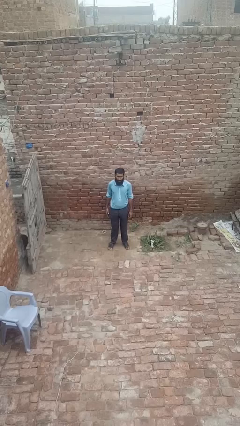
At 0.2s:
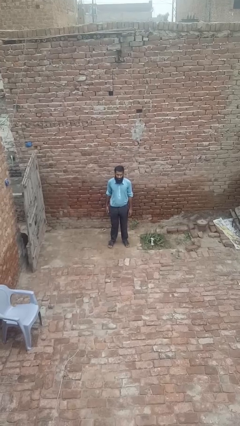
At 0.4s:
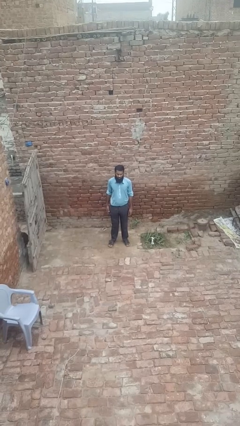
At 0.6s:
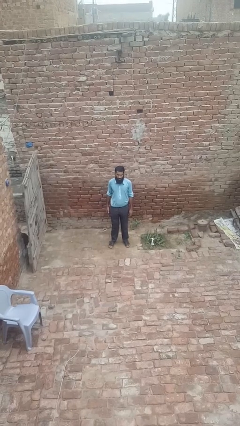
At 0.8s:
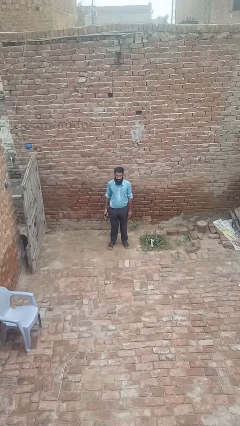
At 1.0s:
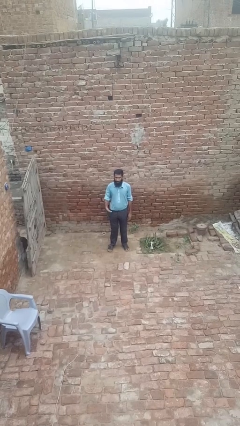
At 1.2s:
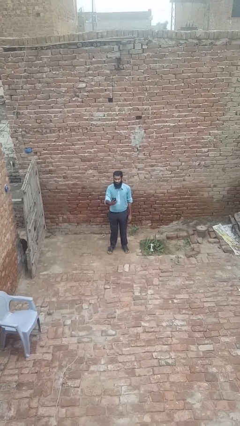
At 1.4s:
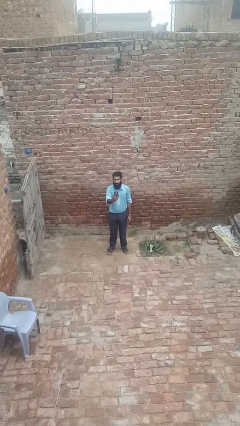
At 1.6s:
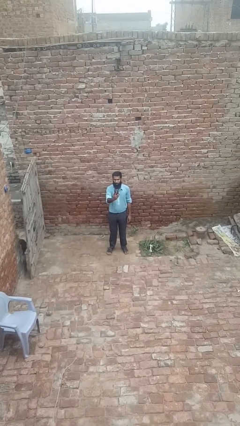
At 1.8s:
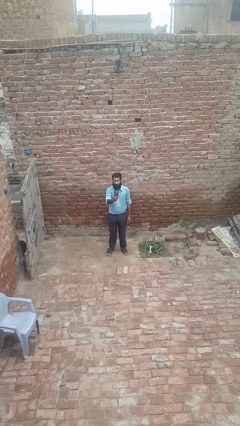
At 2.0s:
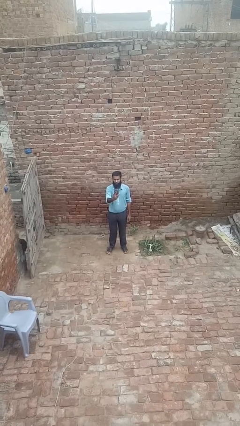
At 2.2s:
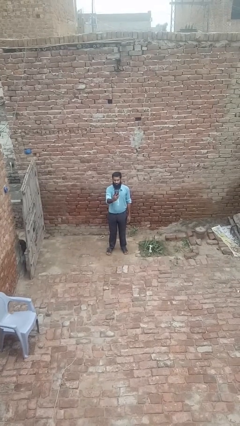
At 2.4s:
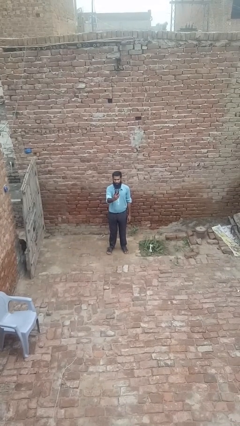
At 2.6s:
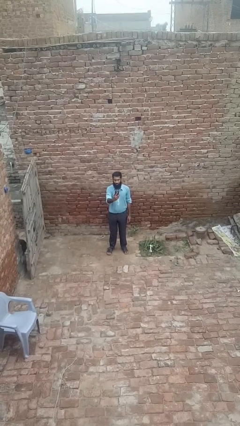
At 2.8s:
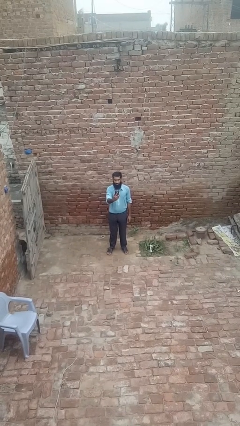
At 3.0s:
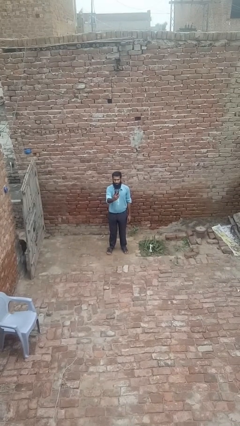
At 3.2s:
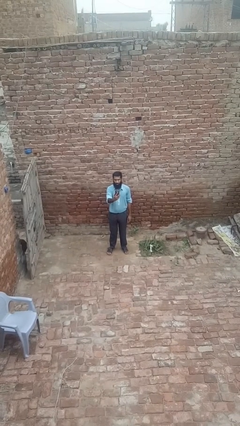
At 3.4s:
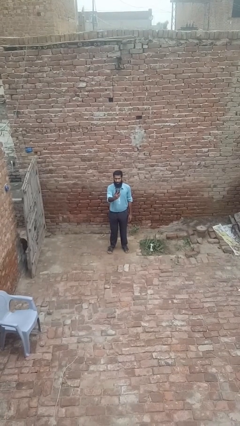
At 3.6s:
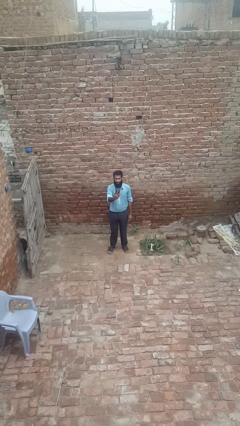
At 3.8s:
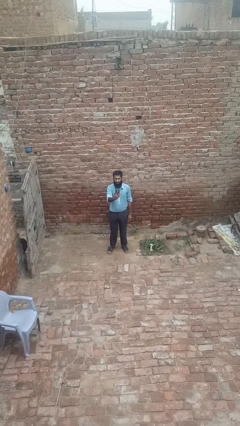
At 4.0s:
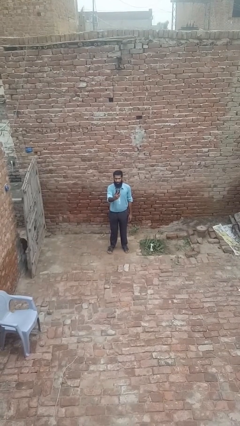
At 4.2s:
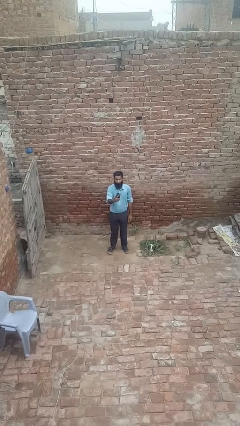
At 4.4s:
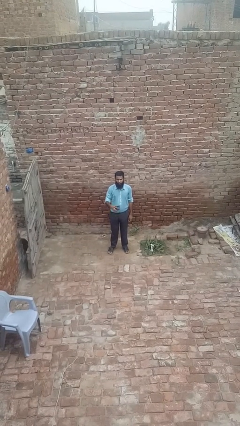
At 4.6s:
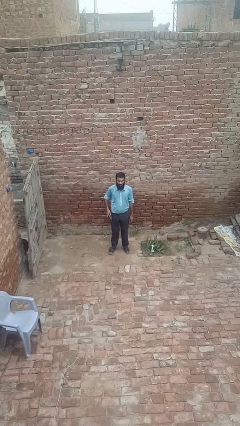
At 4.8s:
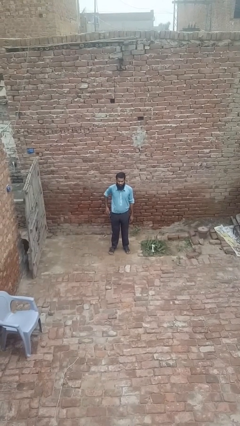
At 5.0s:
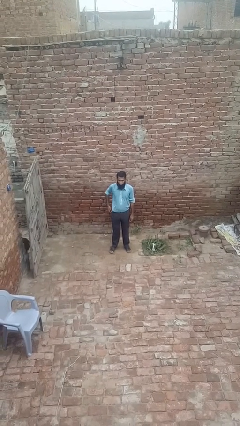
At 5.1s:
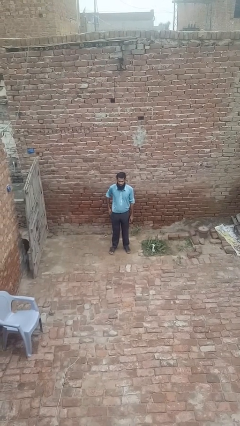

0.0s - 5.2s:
person puts phone into pocket

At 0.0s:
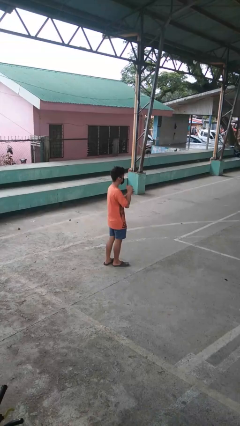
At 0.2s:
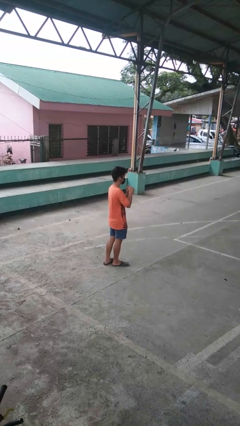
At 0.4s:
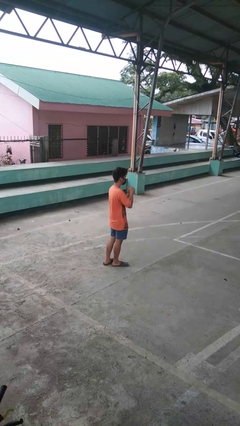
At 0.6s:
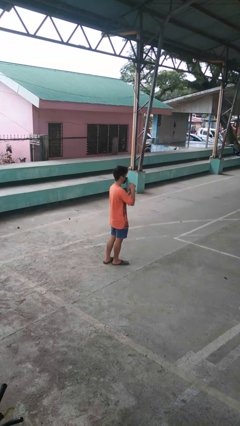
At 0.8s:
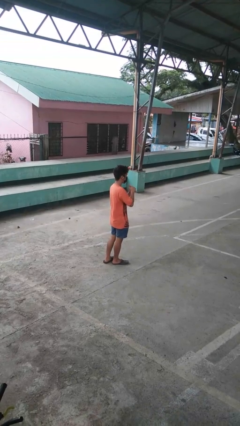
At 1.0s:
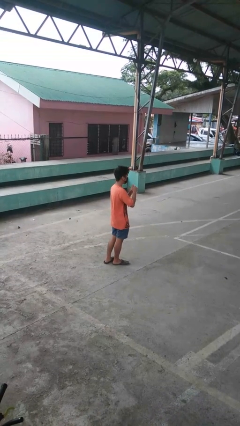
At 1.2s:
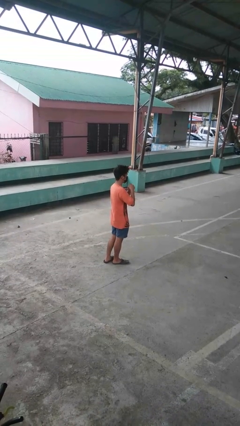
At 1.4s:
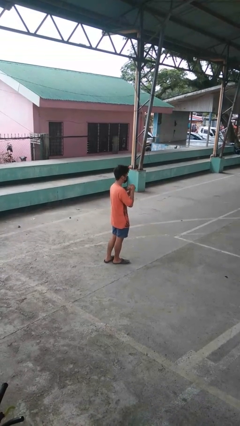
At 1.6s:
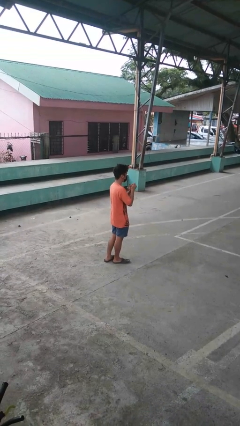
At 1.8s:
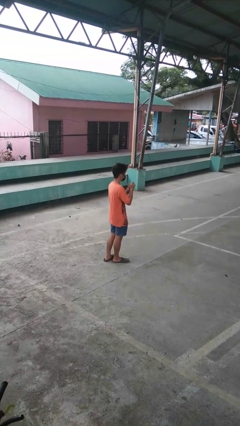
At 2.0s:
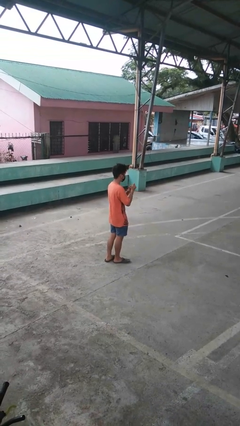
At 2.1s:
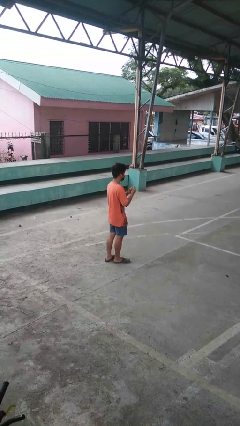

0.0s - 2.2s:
person cracks knuckles

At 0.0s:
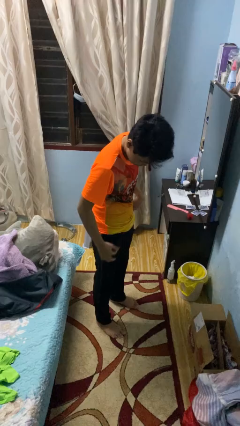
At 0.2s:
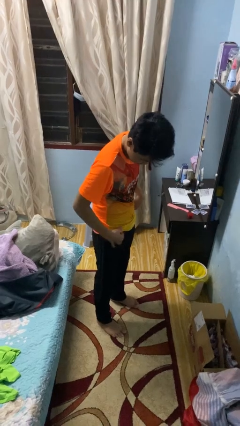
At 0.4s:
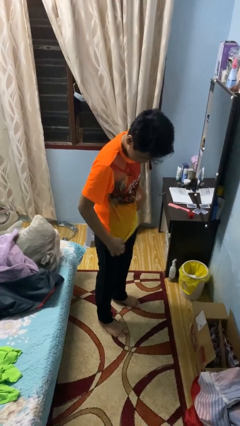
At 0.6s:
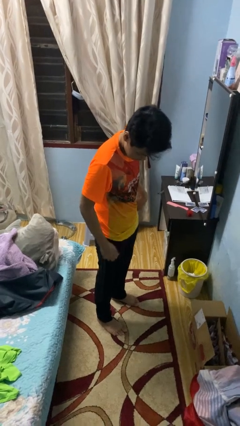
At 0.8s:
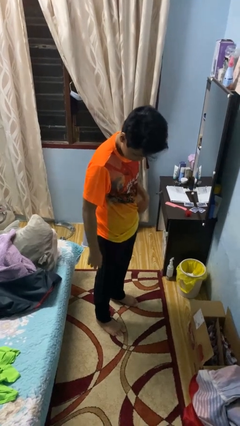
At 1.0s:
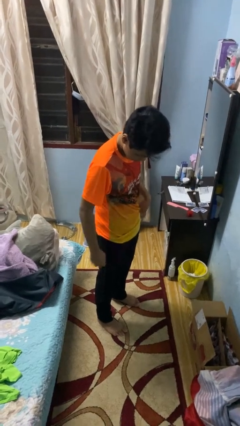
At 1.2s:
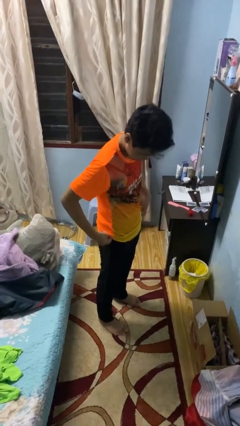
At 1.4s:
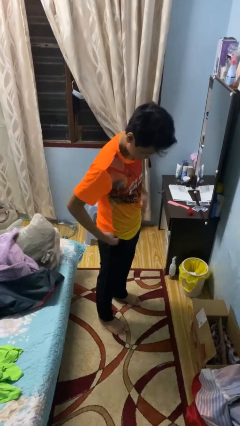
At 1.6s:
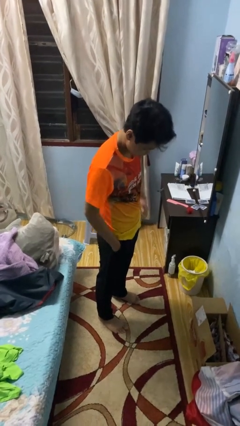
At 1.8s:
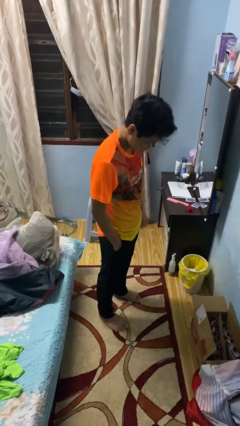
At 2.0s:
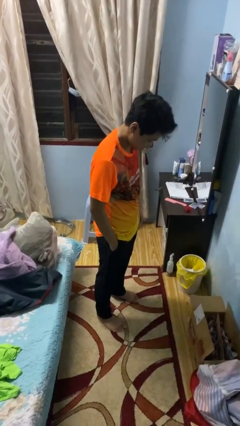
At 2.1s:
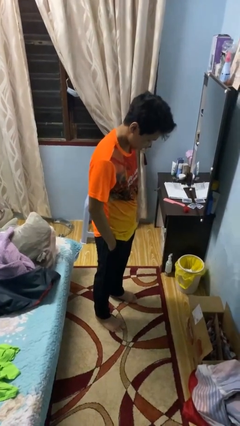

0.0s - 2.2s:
person puts hands in back pockets

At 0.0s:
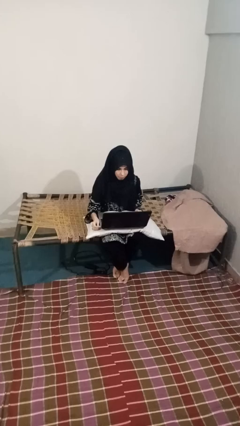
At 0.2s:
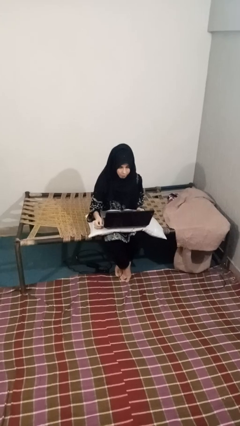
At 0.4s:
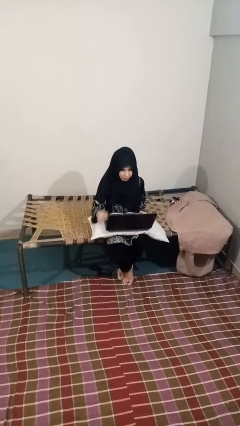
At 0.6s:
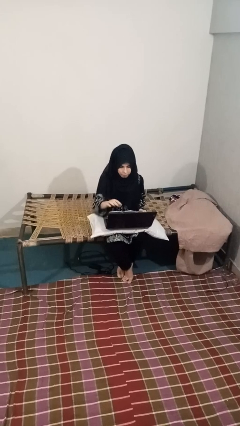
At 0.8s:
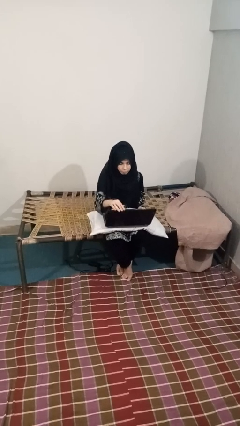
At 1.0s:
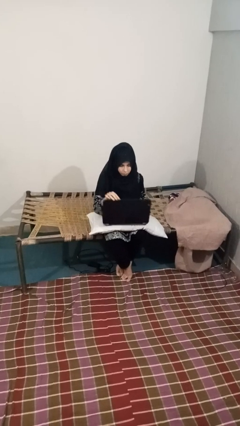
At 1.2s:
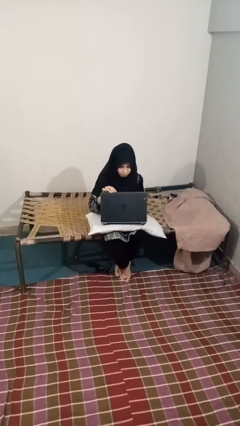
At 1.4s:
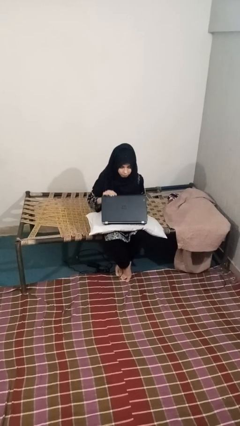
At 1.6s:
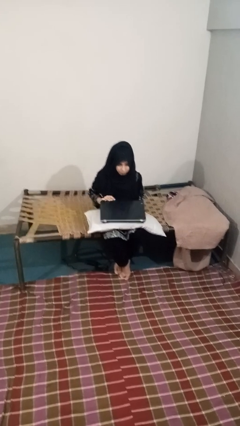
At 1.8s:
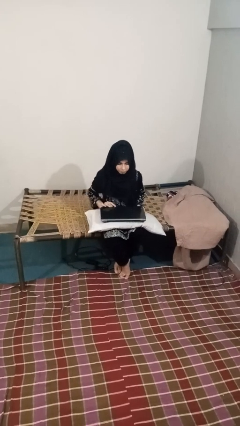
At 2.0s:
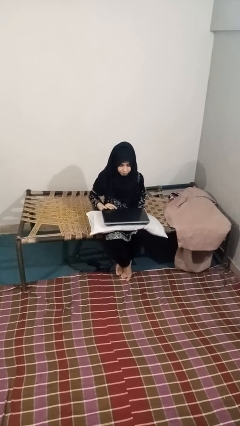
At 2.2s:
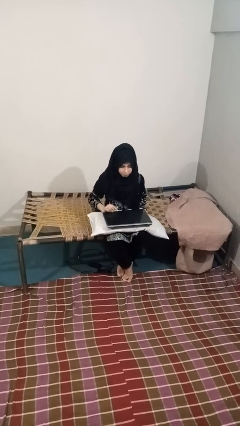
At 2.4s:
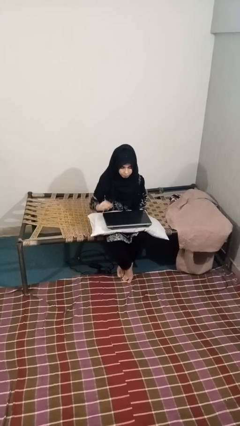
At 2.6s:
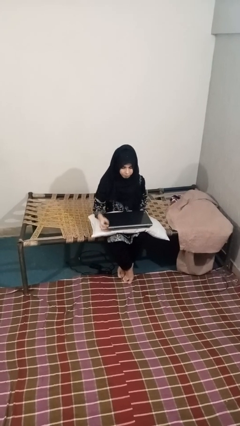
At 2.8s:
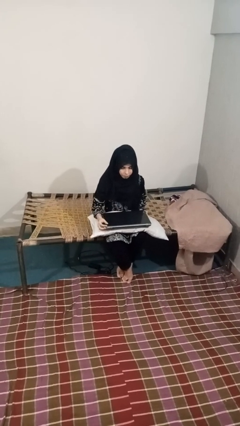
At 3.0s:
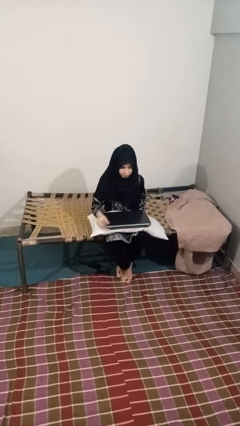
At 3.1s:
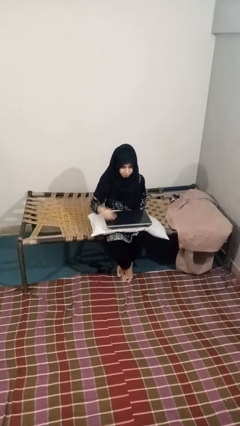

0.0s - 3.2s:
person closes laptop

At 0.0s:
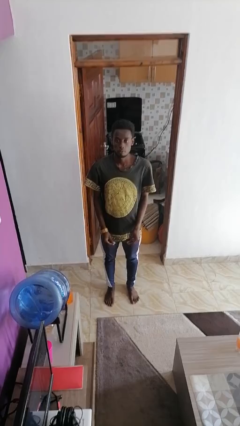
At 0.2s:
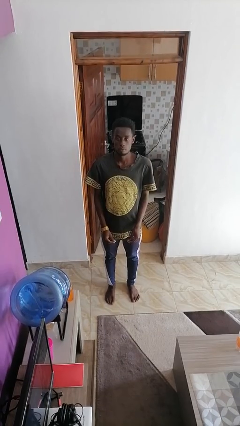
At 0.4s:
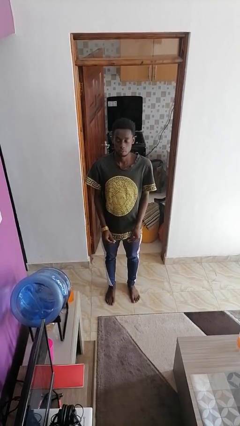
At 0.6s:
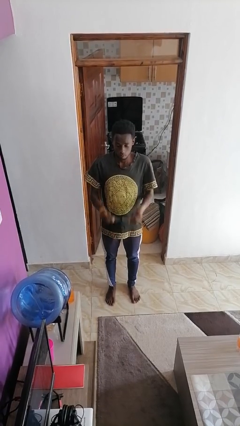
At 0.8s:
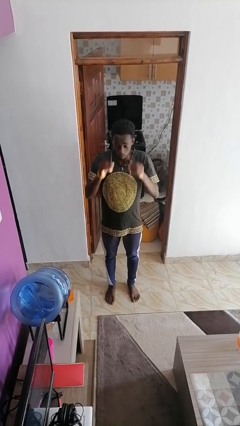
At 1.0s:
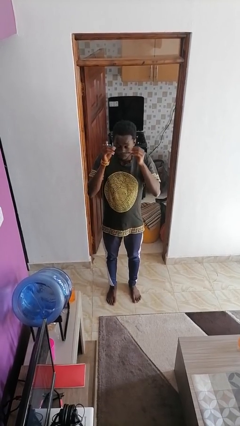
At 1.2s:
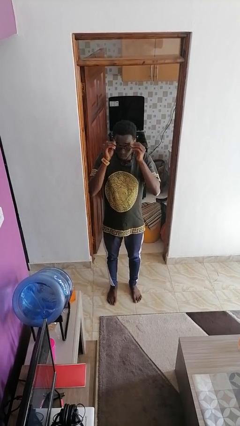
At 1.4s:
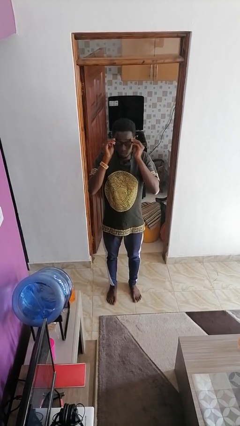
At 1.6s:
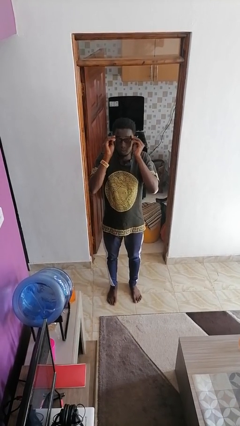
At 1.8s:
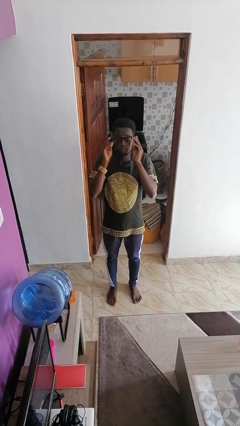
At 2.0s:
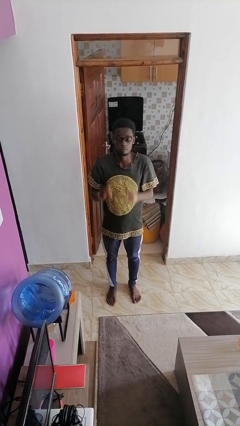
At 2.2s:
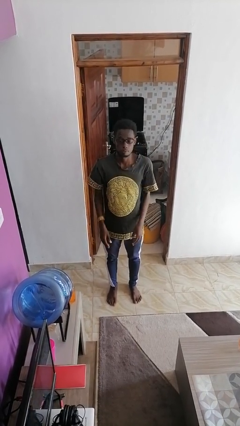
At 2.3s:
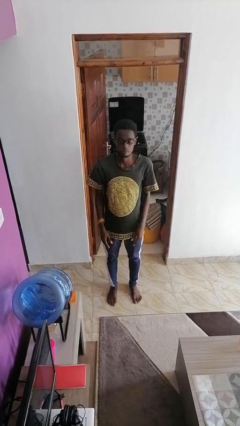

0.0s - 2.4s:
person puts on glasses

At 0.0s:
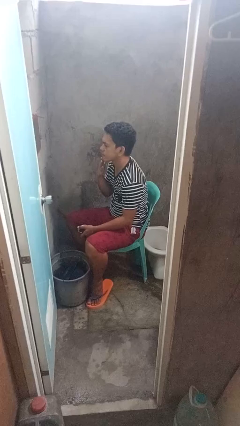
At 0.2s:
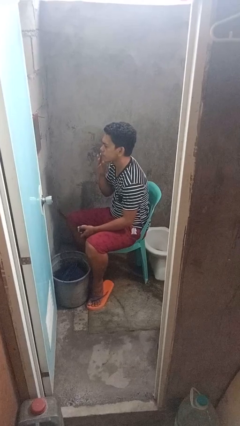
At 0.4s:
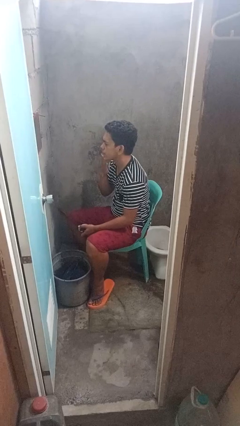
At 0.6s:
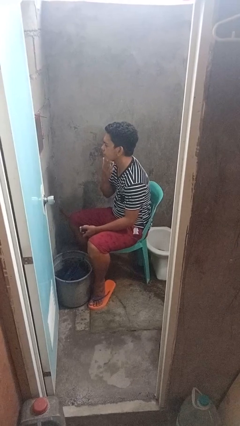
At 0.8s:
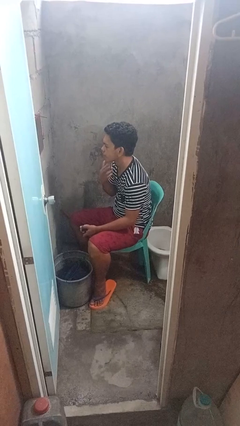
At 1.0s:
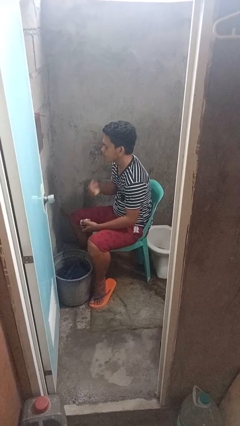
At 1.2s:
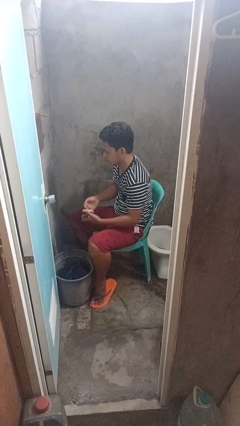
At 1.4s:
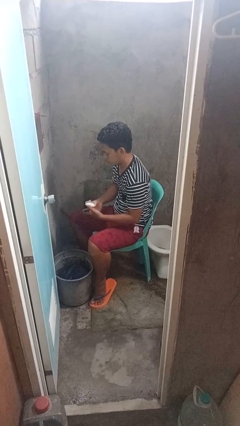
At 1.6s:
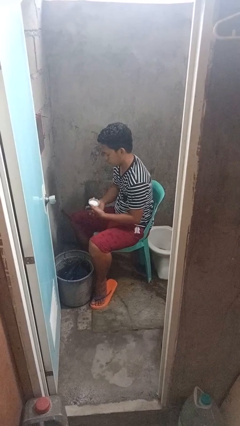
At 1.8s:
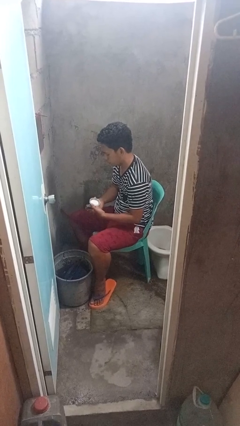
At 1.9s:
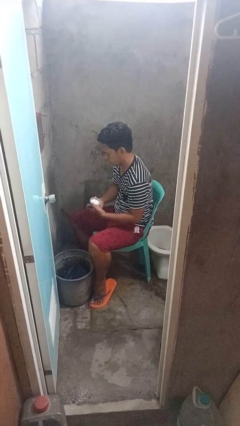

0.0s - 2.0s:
person applies shaving cream
